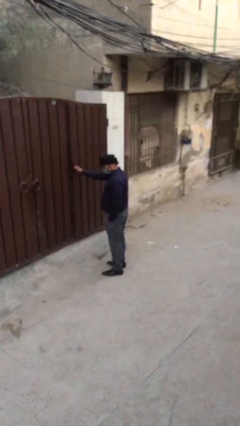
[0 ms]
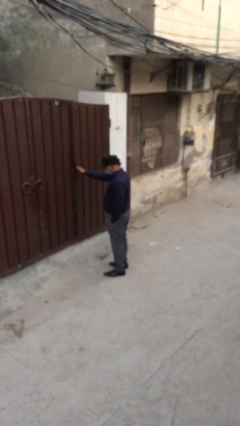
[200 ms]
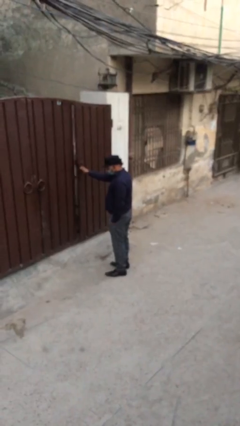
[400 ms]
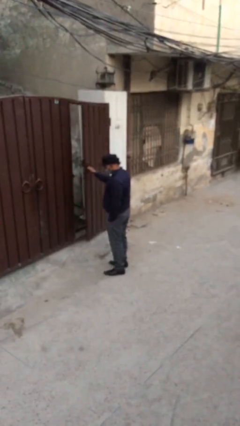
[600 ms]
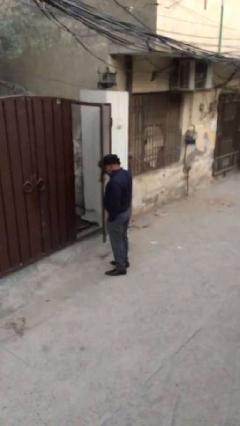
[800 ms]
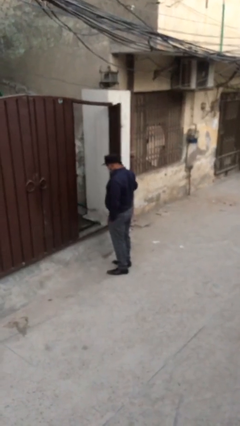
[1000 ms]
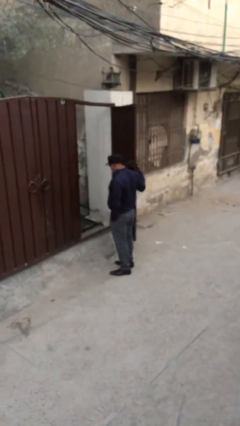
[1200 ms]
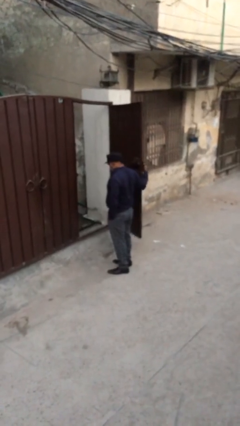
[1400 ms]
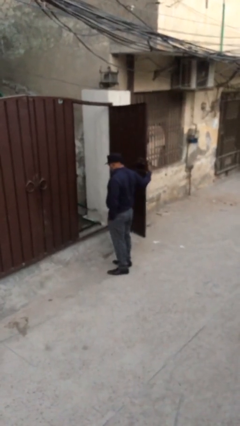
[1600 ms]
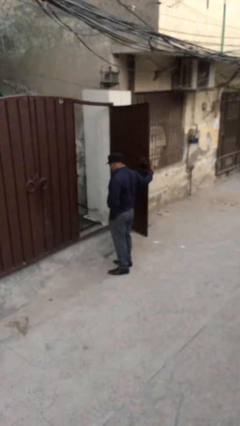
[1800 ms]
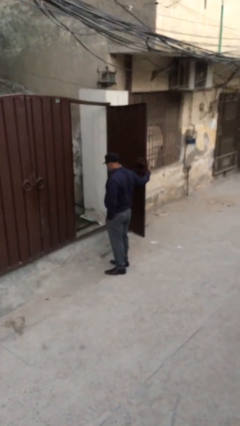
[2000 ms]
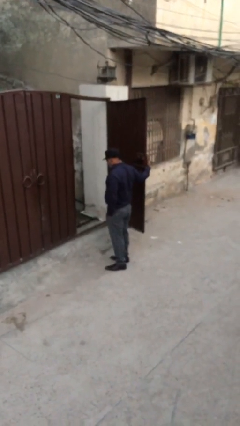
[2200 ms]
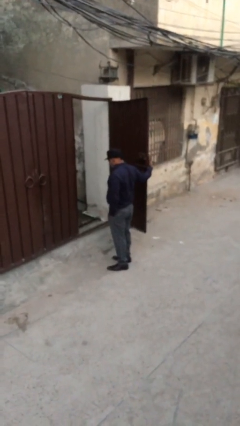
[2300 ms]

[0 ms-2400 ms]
person opens facility door

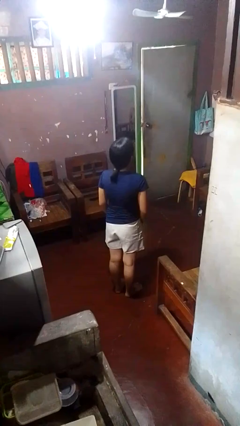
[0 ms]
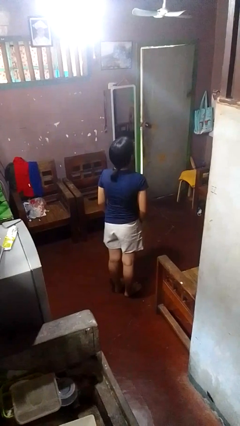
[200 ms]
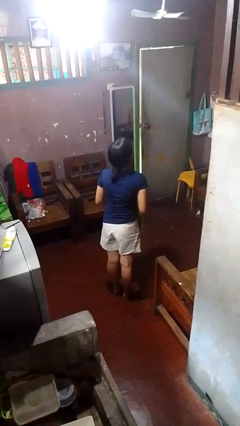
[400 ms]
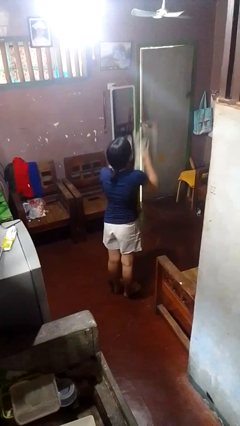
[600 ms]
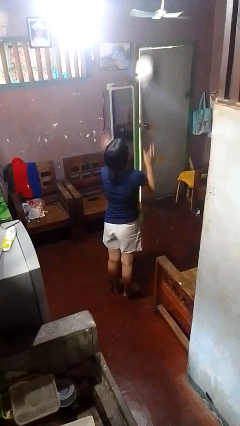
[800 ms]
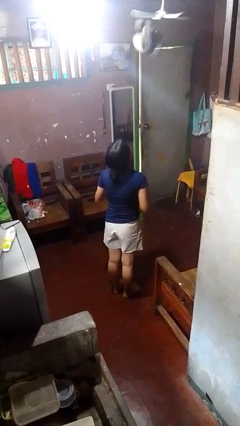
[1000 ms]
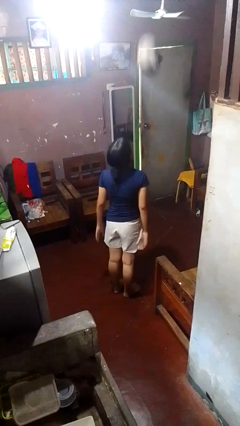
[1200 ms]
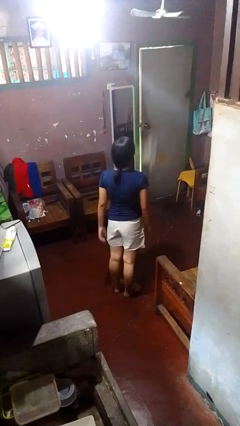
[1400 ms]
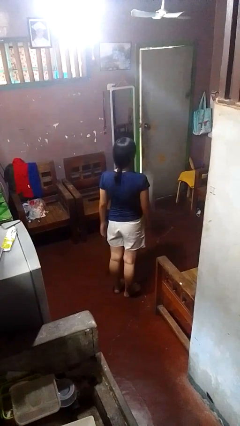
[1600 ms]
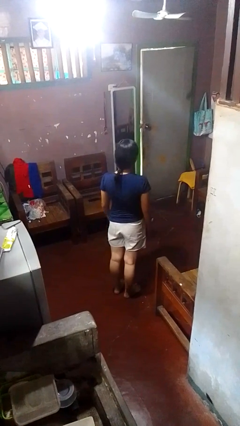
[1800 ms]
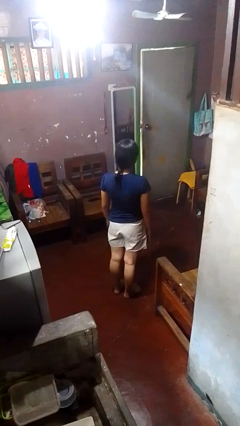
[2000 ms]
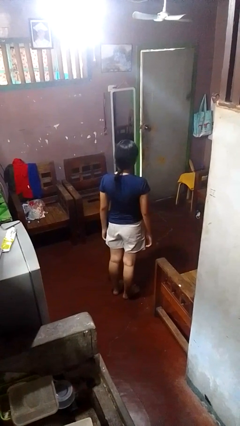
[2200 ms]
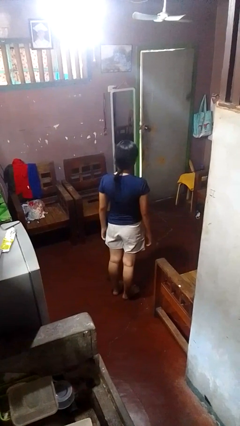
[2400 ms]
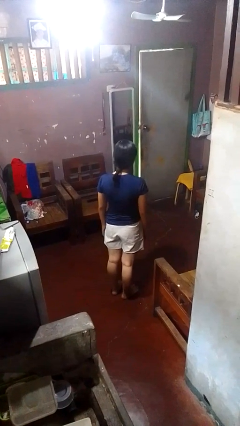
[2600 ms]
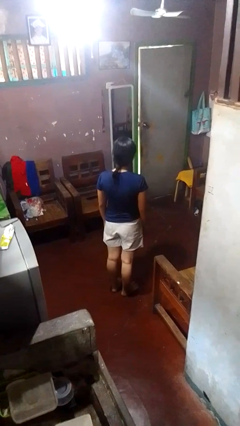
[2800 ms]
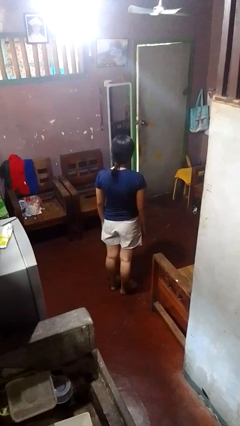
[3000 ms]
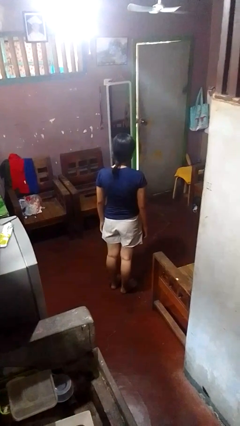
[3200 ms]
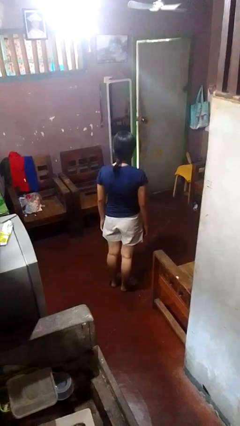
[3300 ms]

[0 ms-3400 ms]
person throws object into air

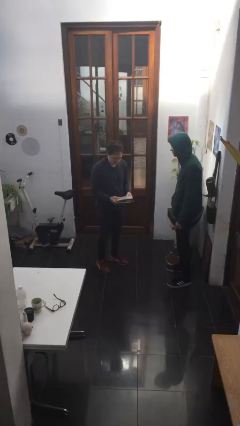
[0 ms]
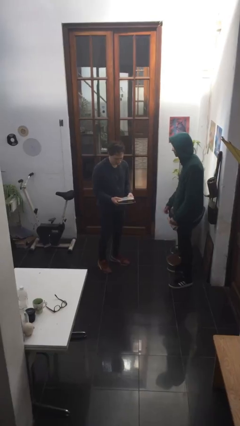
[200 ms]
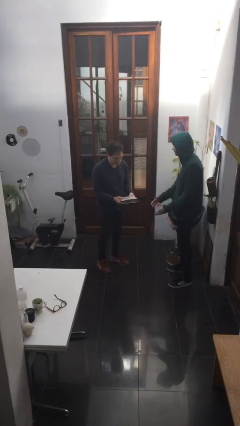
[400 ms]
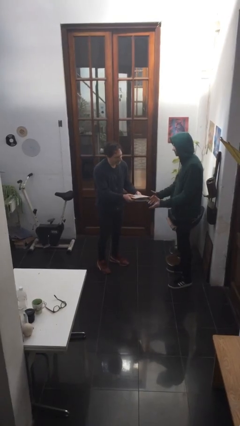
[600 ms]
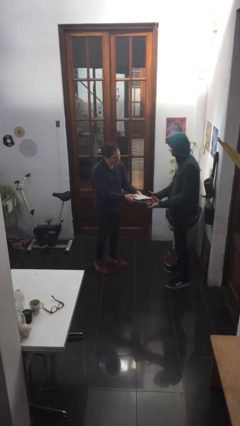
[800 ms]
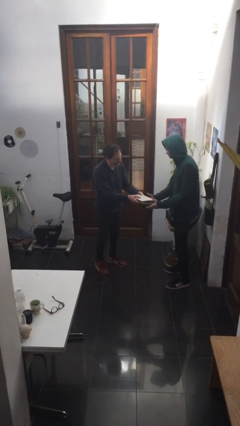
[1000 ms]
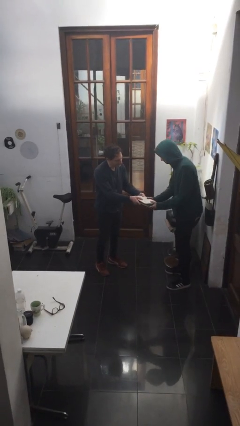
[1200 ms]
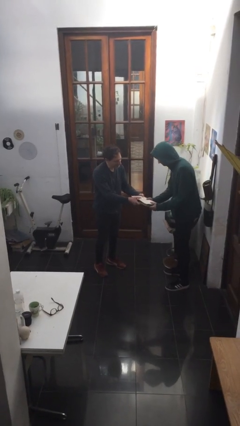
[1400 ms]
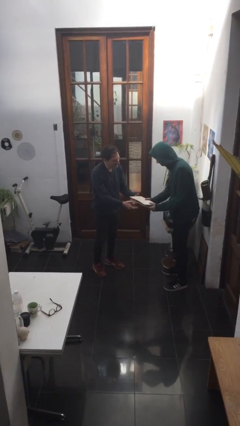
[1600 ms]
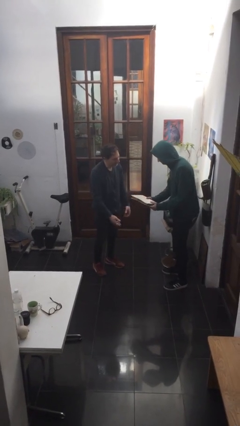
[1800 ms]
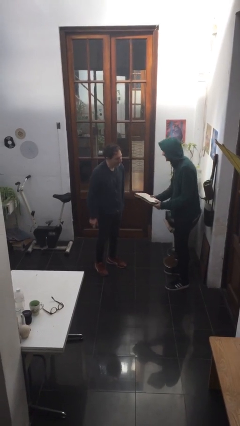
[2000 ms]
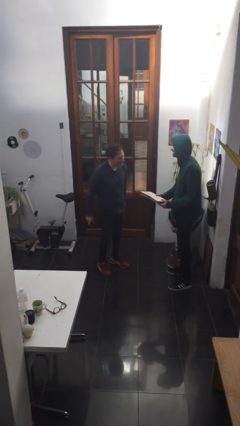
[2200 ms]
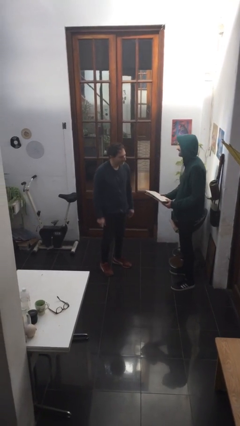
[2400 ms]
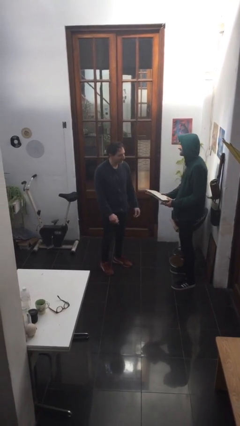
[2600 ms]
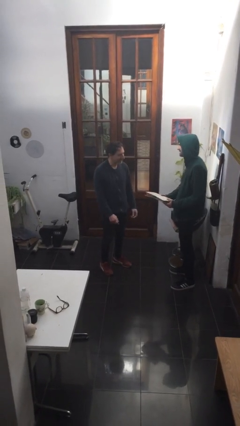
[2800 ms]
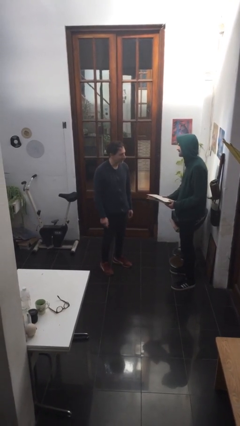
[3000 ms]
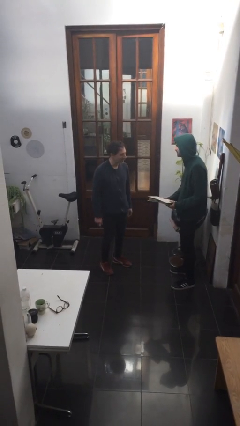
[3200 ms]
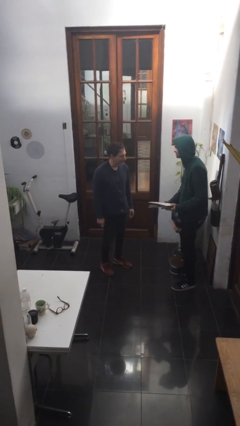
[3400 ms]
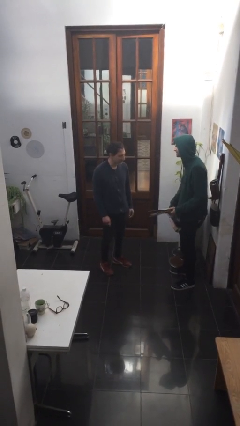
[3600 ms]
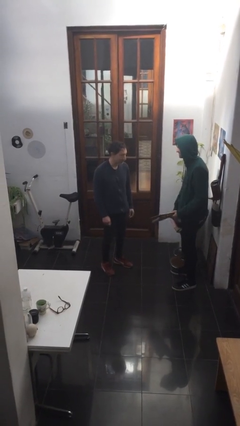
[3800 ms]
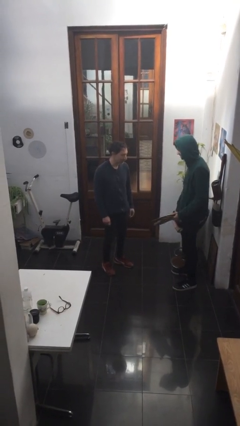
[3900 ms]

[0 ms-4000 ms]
person transfers object to person

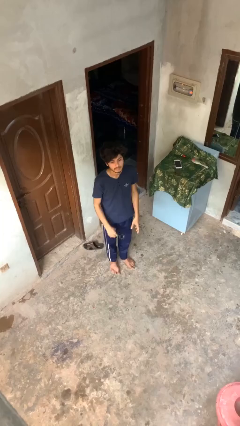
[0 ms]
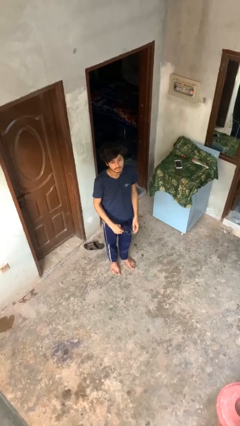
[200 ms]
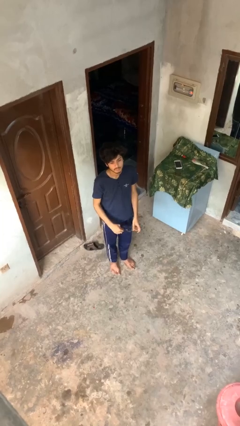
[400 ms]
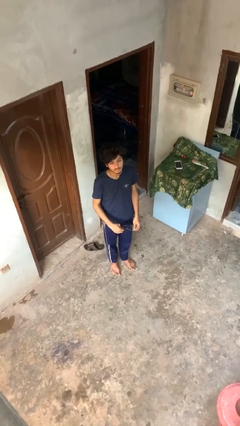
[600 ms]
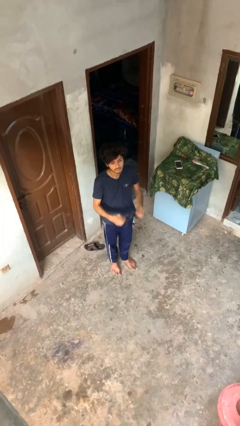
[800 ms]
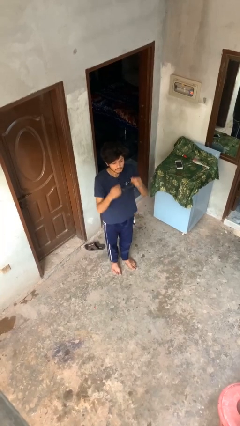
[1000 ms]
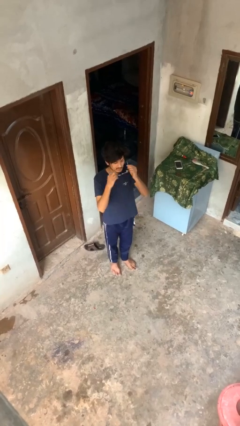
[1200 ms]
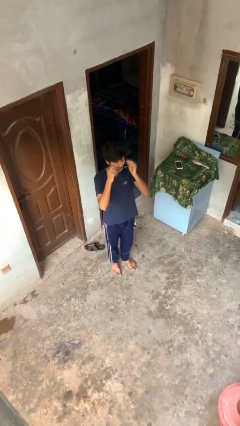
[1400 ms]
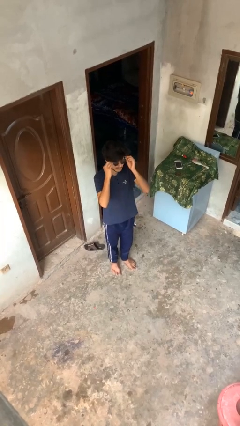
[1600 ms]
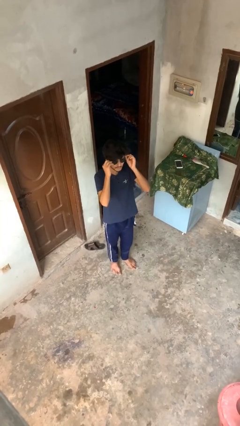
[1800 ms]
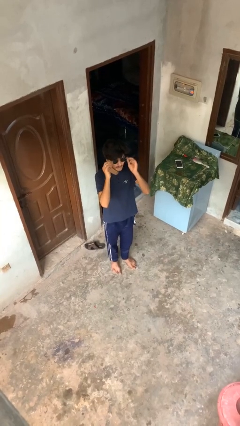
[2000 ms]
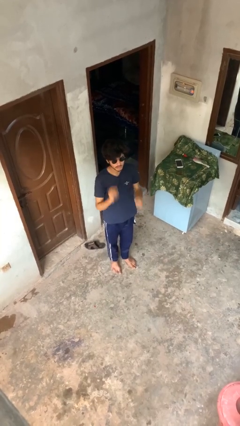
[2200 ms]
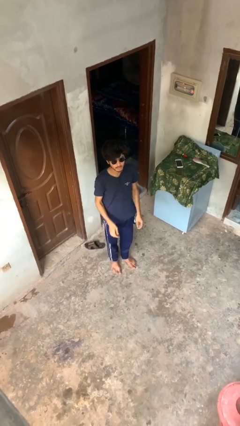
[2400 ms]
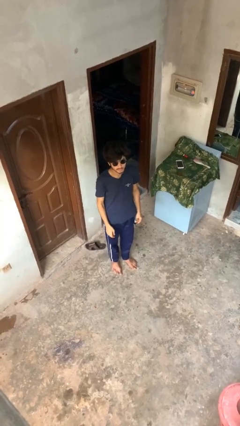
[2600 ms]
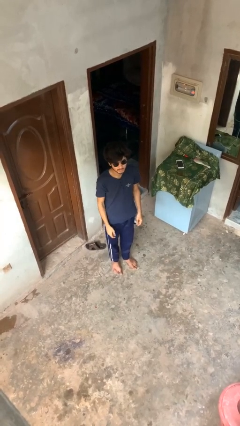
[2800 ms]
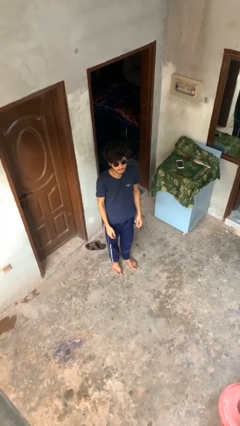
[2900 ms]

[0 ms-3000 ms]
person puts on sunglasses

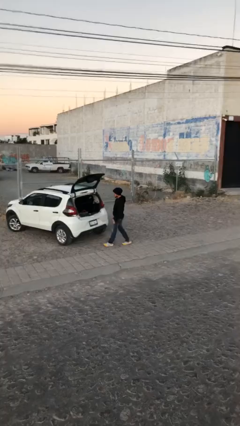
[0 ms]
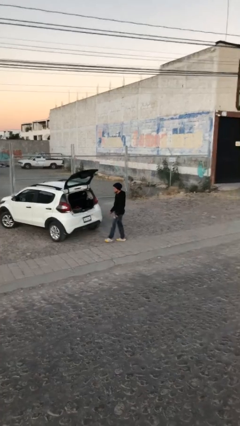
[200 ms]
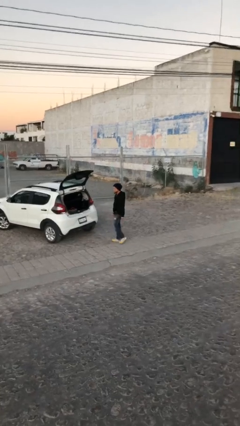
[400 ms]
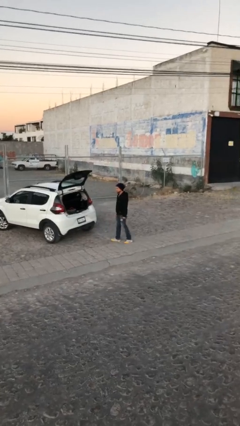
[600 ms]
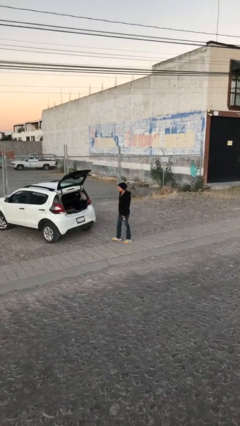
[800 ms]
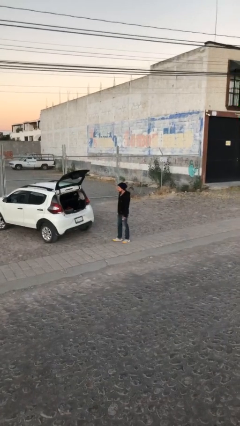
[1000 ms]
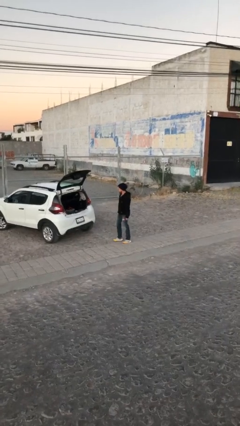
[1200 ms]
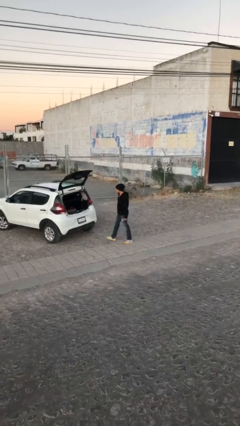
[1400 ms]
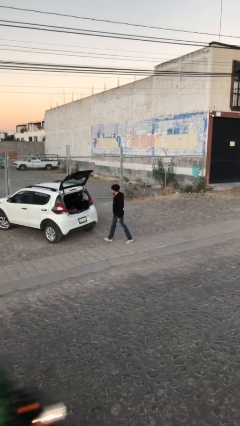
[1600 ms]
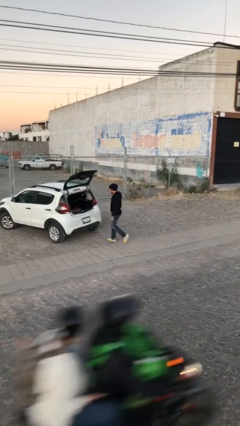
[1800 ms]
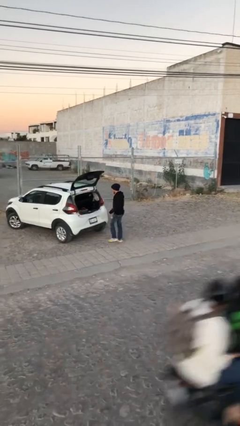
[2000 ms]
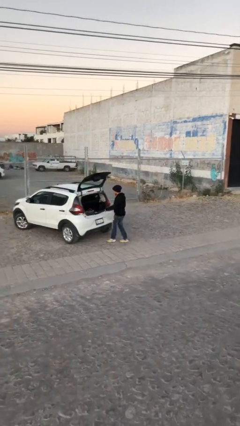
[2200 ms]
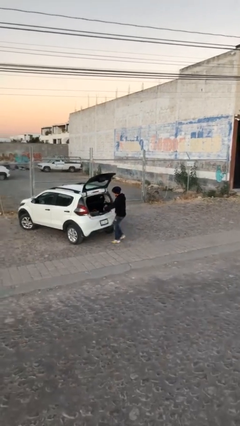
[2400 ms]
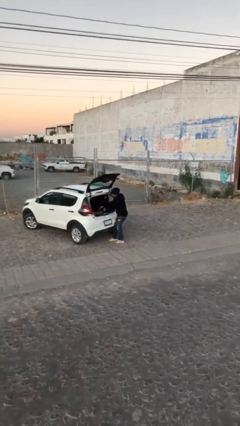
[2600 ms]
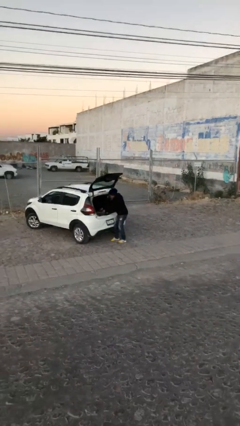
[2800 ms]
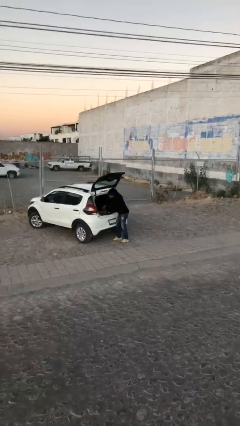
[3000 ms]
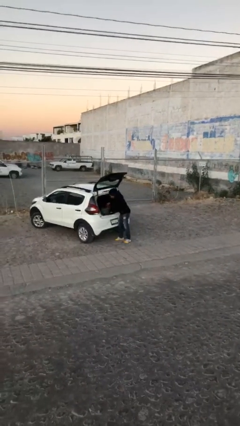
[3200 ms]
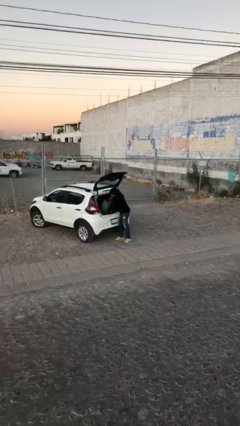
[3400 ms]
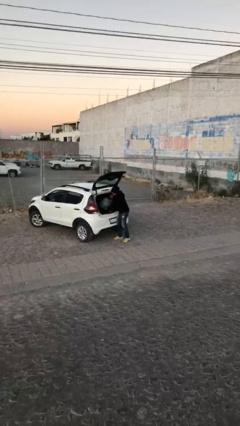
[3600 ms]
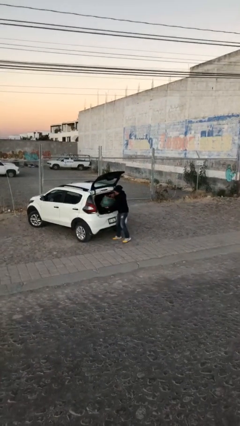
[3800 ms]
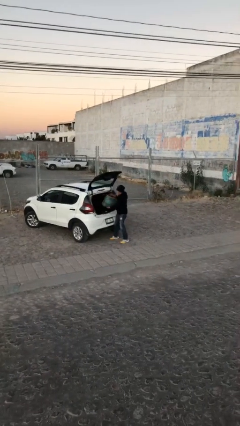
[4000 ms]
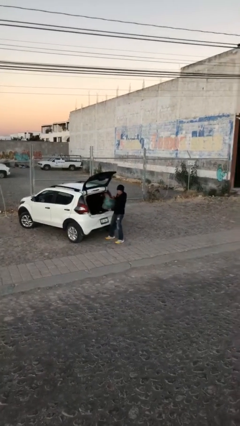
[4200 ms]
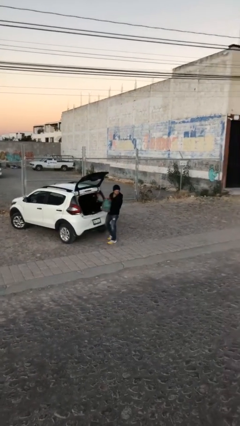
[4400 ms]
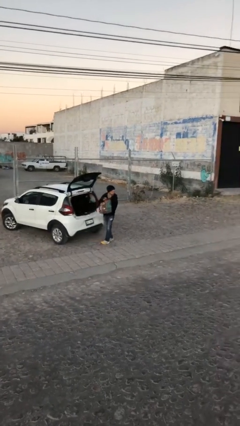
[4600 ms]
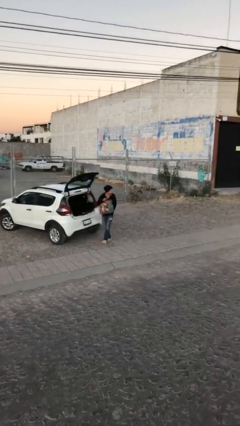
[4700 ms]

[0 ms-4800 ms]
person unloads car
